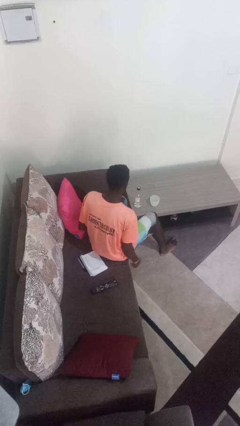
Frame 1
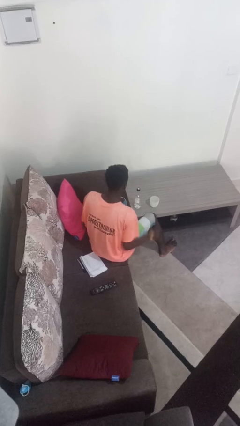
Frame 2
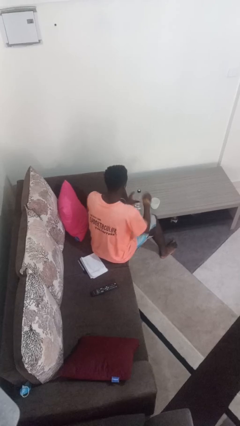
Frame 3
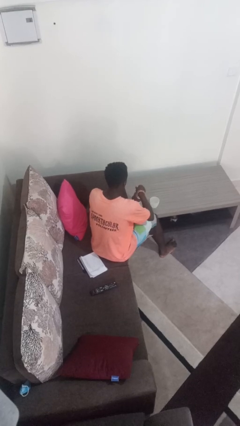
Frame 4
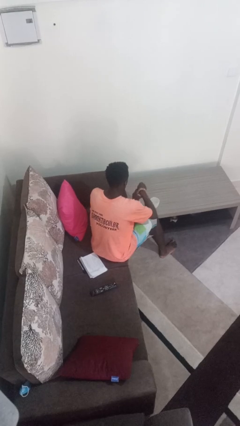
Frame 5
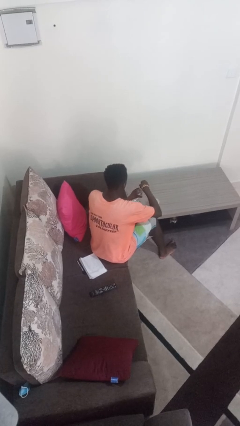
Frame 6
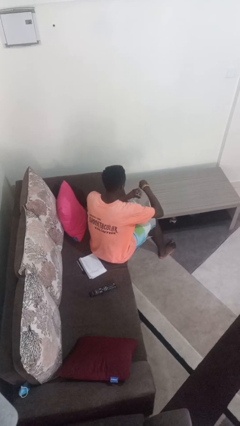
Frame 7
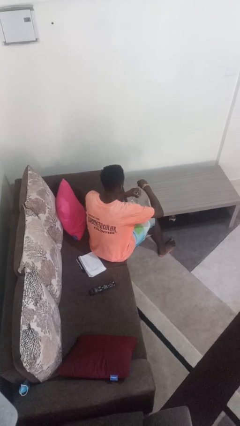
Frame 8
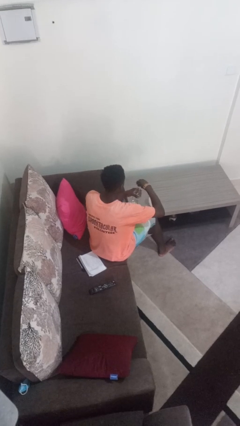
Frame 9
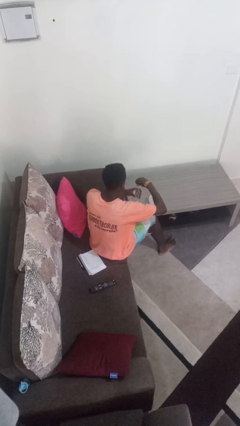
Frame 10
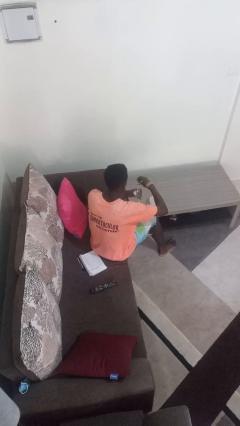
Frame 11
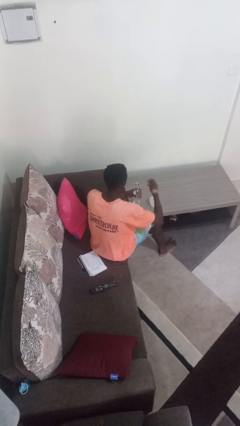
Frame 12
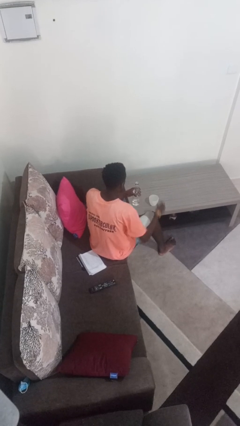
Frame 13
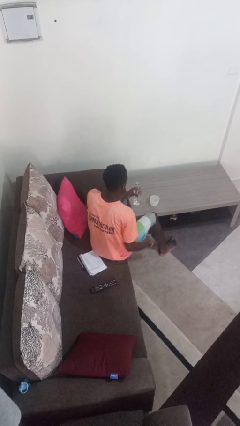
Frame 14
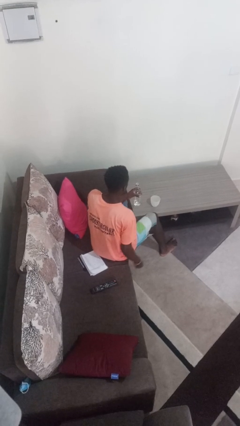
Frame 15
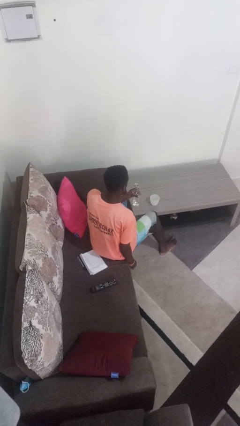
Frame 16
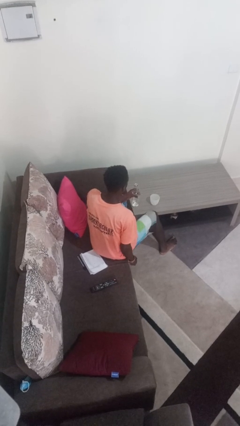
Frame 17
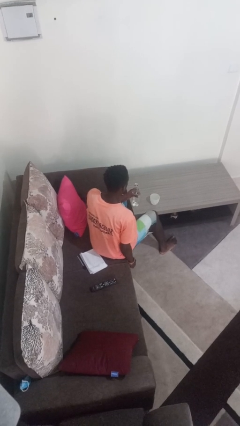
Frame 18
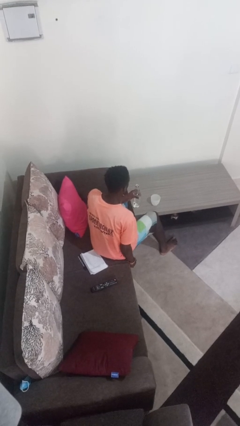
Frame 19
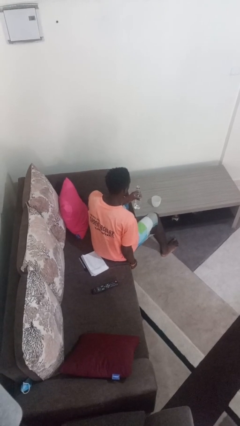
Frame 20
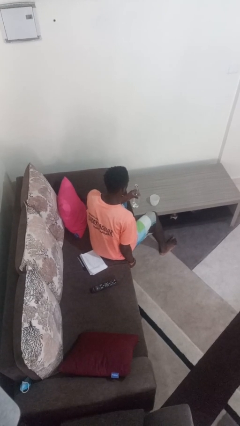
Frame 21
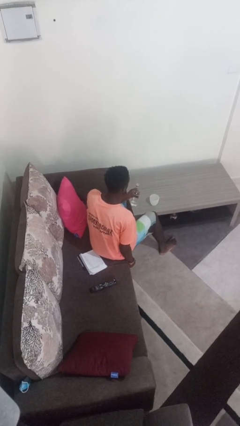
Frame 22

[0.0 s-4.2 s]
person unscrews lid from bottle

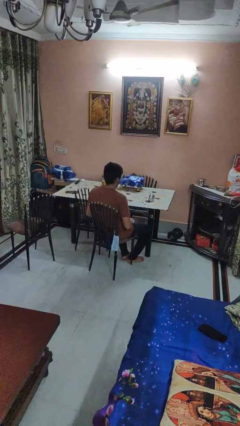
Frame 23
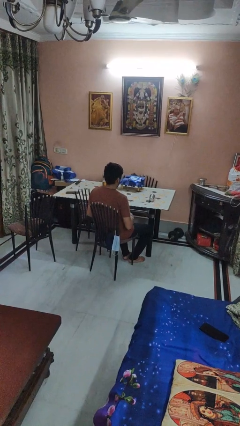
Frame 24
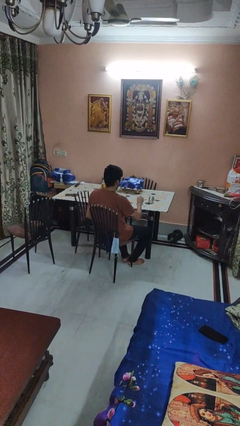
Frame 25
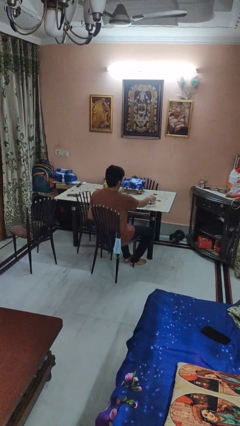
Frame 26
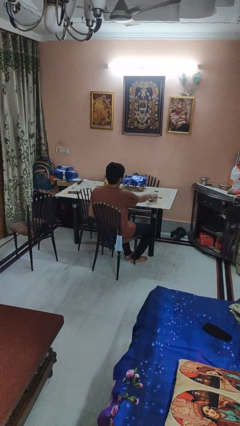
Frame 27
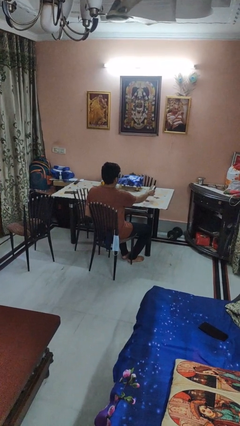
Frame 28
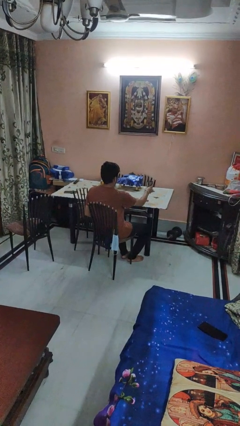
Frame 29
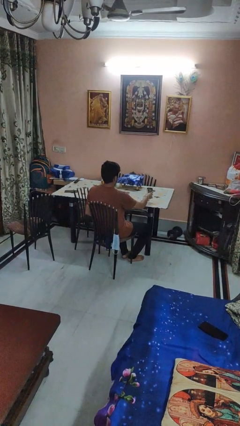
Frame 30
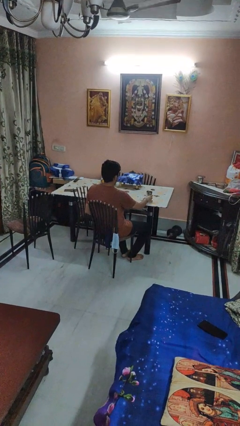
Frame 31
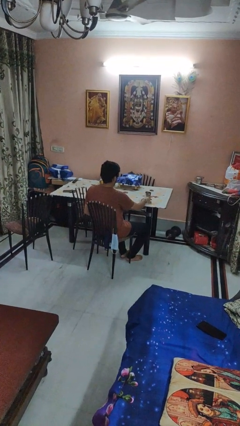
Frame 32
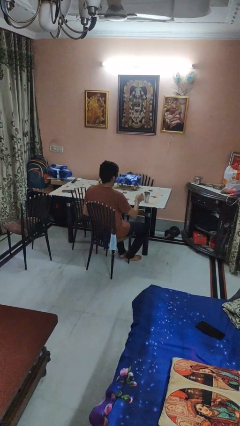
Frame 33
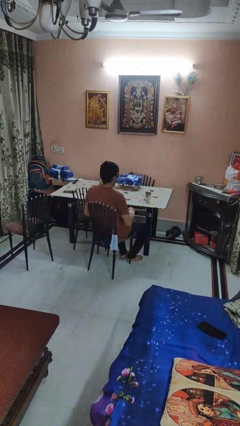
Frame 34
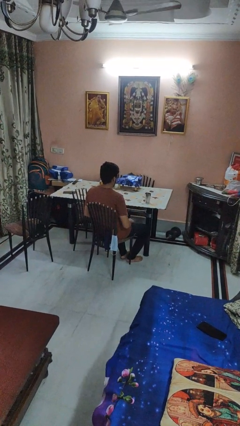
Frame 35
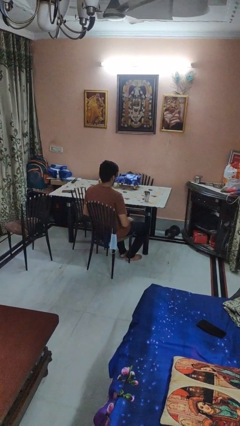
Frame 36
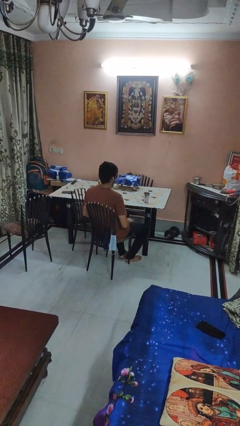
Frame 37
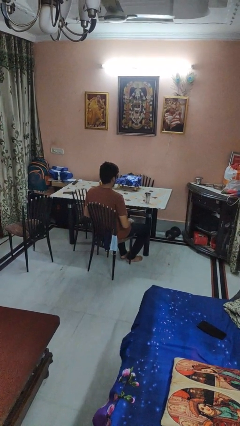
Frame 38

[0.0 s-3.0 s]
person sets upright glass

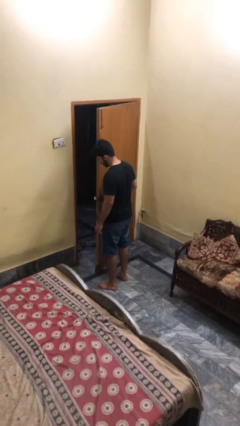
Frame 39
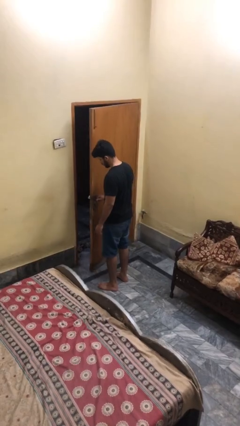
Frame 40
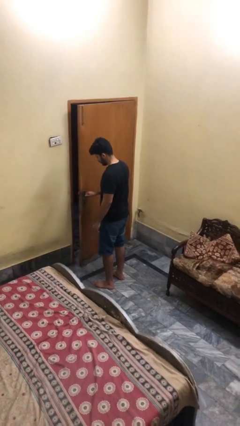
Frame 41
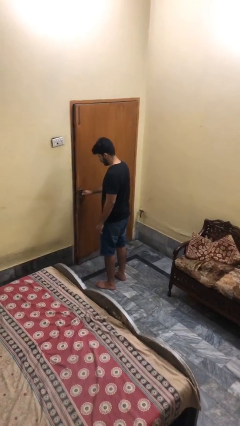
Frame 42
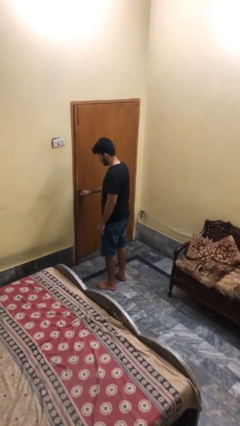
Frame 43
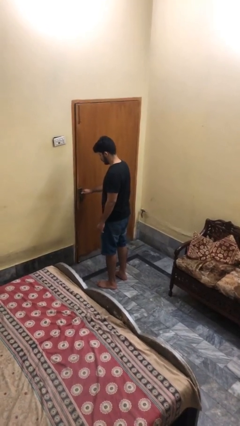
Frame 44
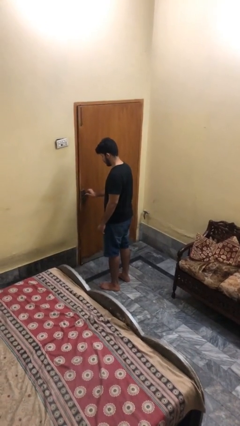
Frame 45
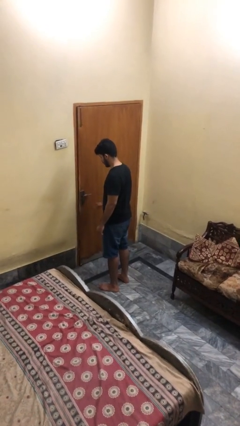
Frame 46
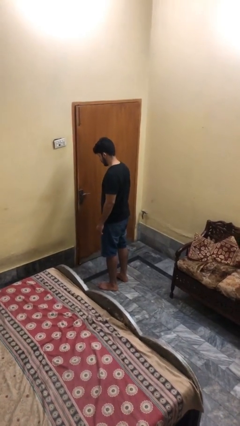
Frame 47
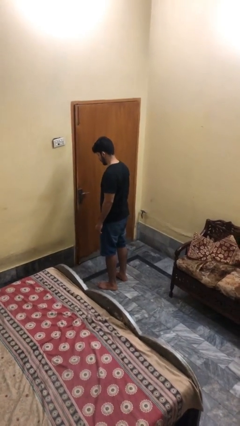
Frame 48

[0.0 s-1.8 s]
person closes facility door

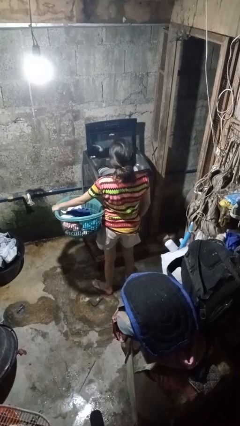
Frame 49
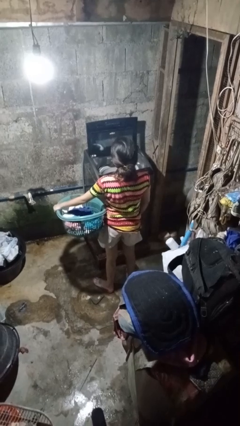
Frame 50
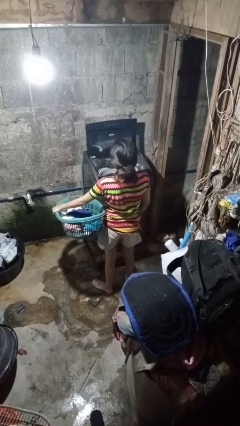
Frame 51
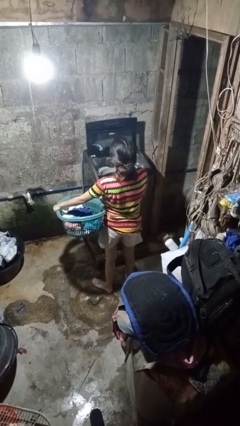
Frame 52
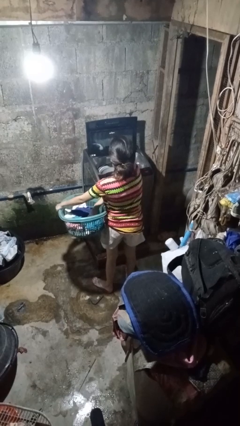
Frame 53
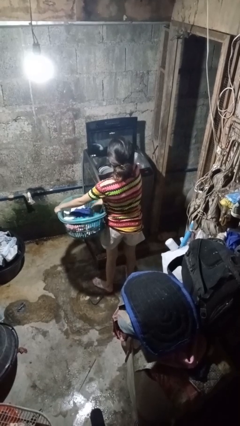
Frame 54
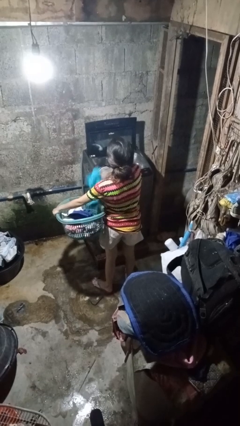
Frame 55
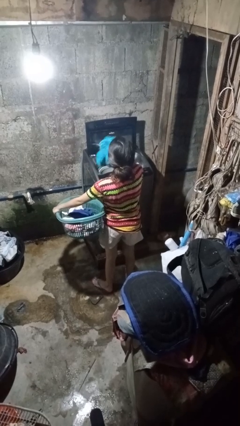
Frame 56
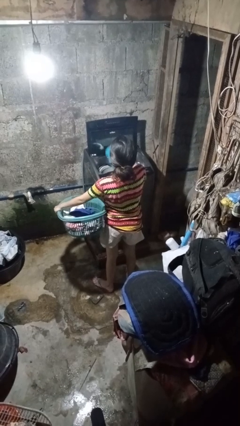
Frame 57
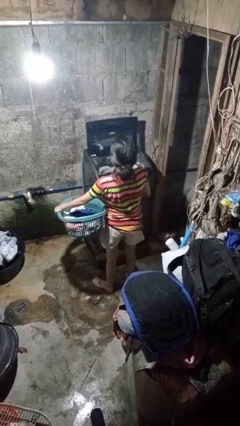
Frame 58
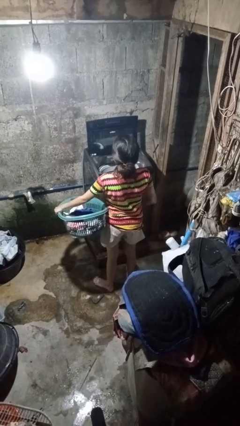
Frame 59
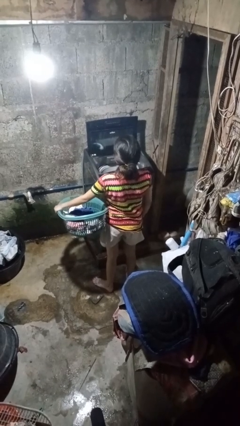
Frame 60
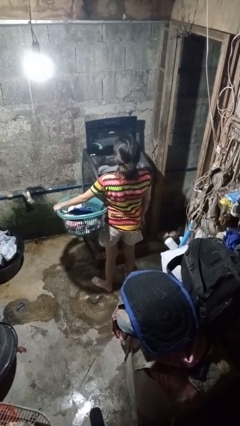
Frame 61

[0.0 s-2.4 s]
person loads clotheswasher

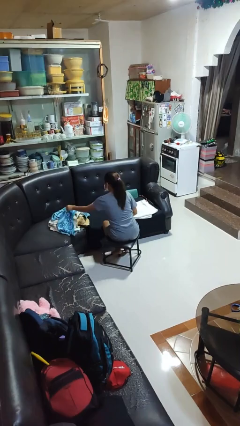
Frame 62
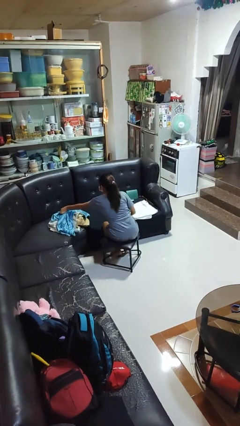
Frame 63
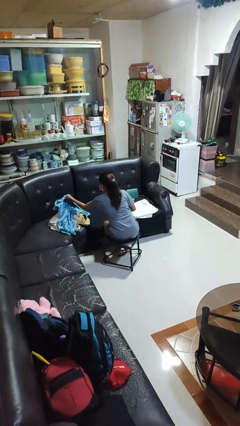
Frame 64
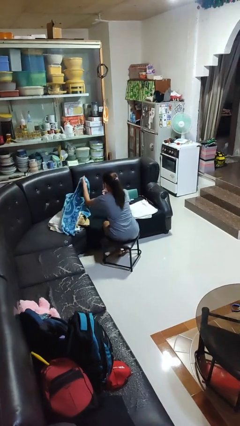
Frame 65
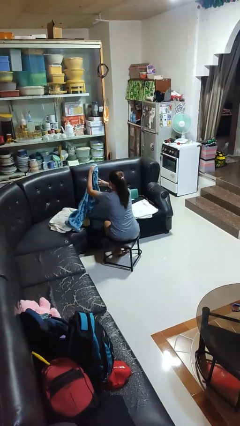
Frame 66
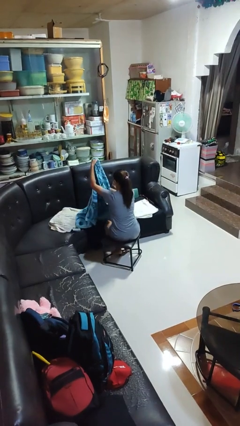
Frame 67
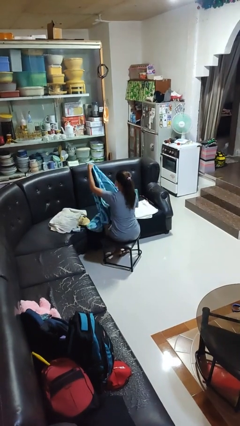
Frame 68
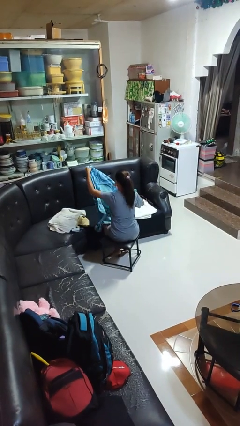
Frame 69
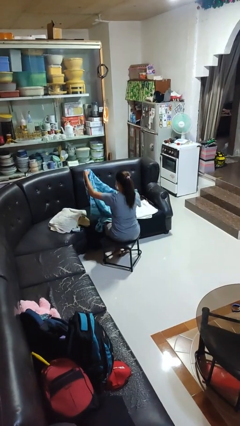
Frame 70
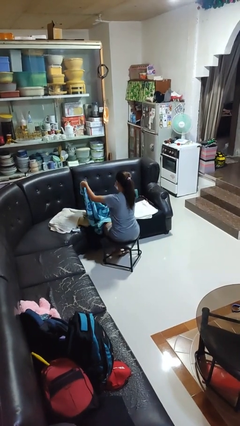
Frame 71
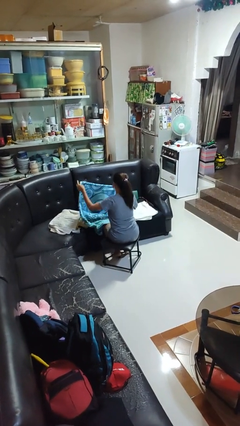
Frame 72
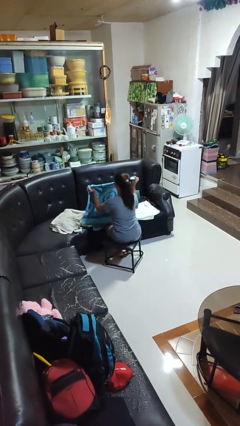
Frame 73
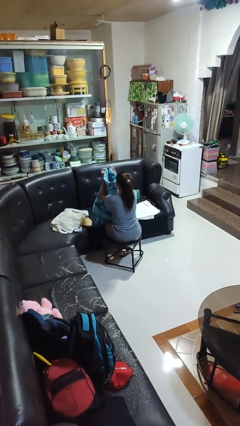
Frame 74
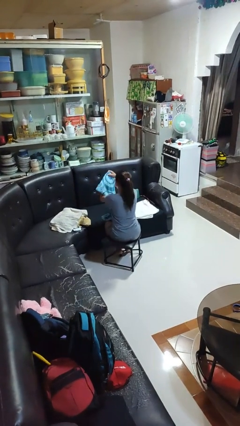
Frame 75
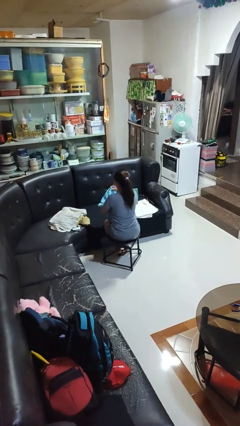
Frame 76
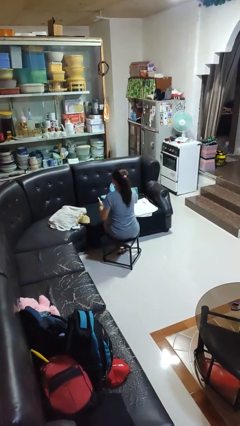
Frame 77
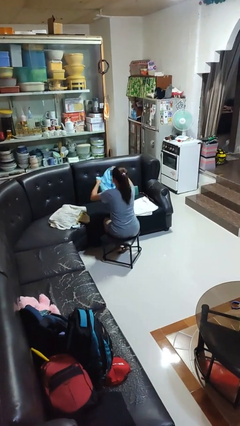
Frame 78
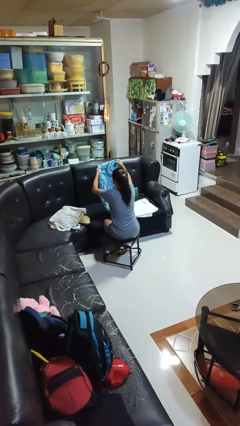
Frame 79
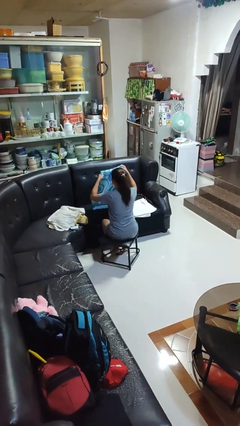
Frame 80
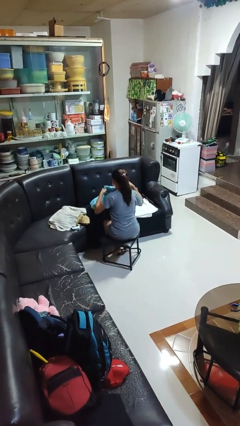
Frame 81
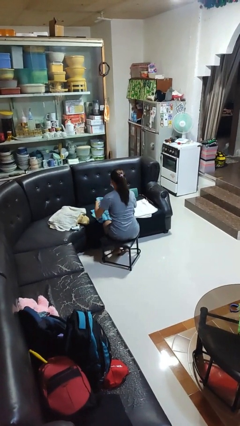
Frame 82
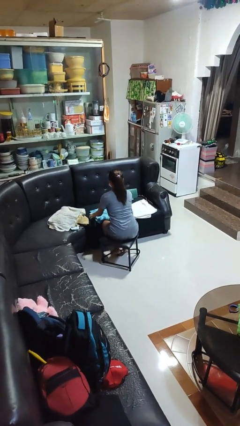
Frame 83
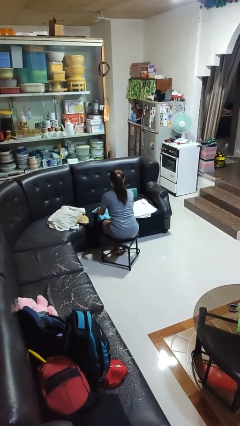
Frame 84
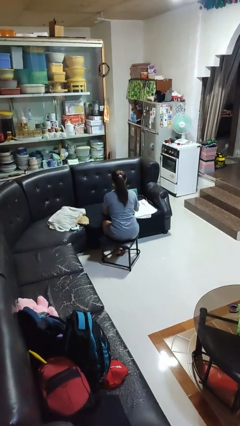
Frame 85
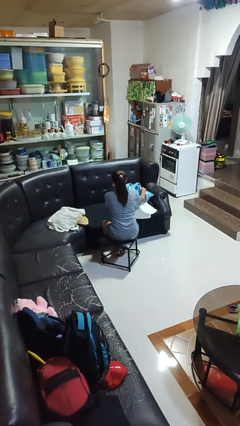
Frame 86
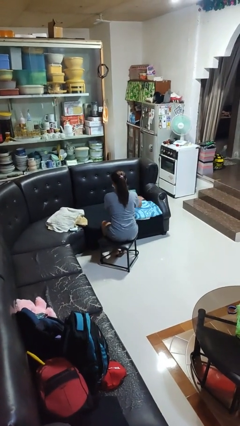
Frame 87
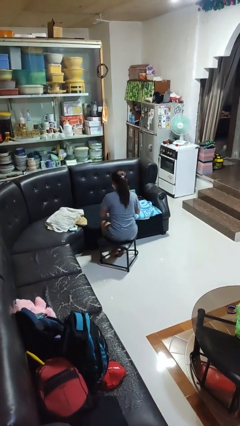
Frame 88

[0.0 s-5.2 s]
person folds towel

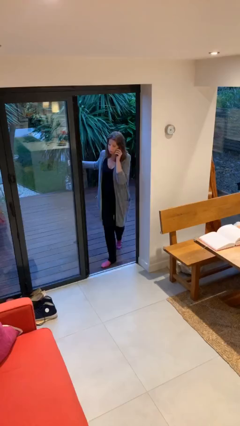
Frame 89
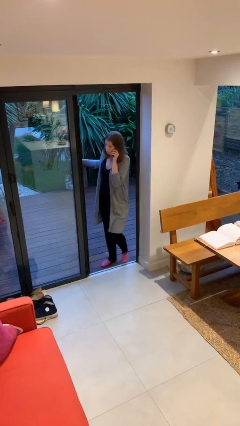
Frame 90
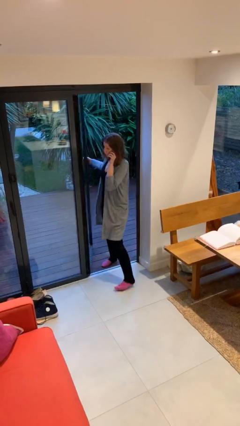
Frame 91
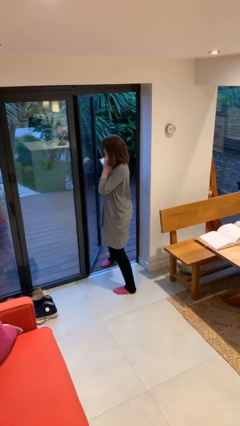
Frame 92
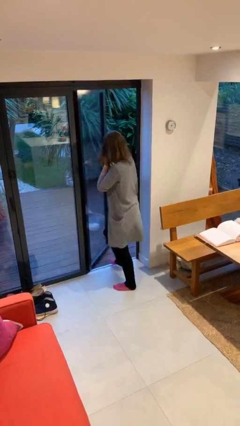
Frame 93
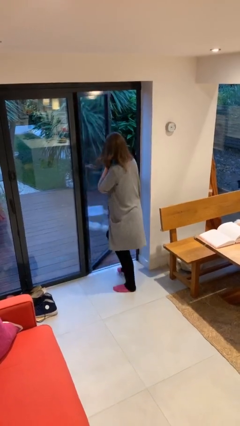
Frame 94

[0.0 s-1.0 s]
person enters scene through structure
